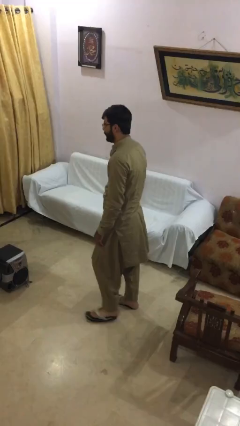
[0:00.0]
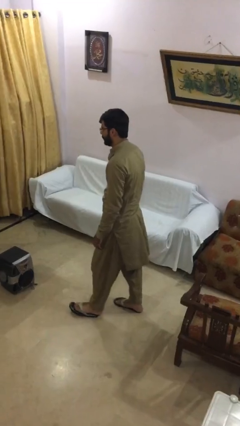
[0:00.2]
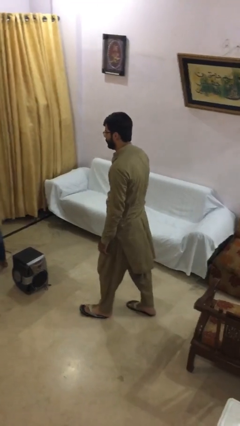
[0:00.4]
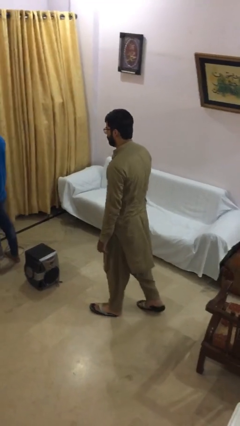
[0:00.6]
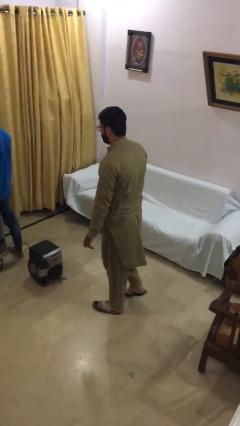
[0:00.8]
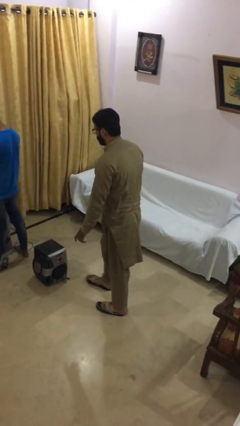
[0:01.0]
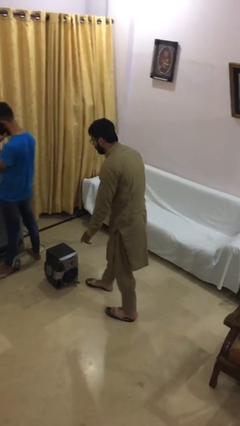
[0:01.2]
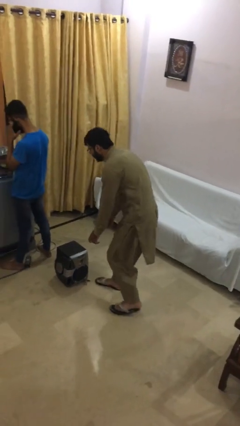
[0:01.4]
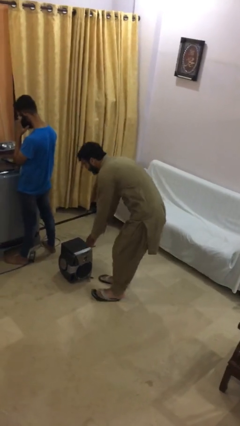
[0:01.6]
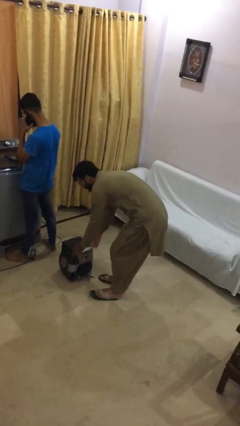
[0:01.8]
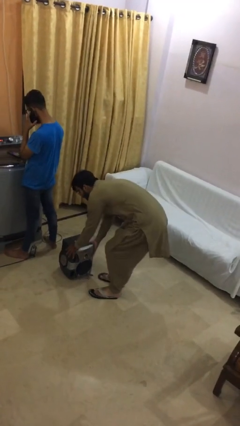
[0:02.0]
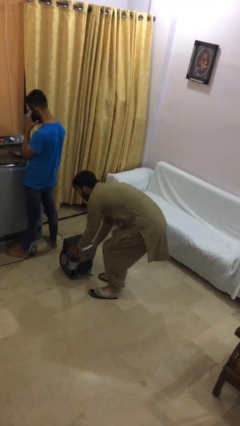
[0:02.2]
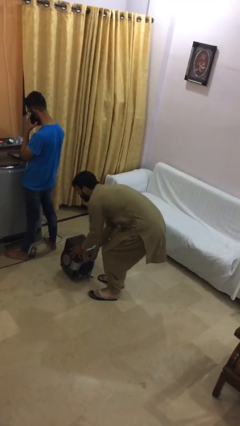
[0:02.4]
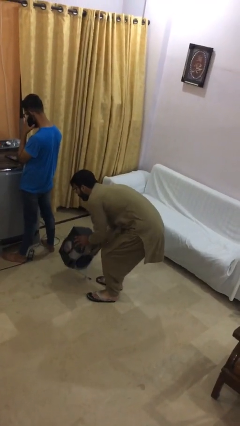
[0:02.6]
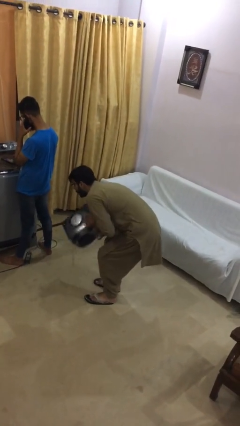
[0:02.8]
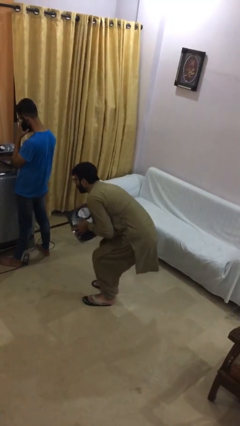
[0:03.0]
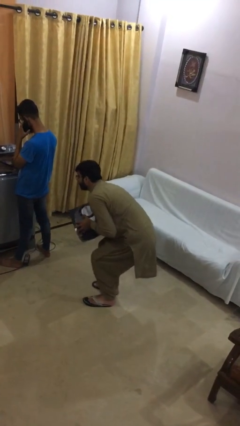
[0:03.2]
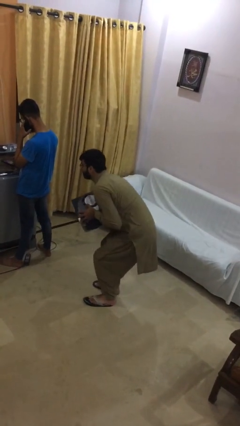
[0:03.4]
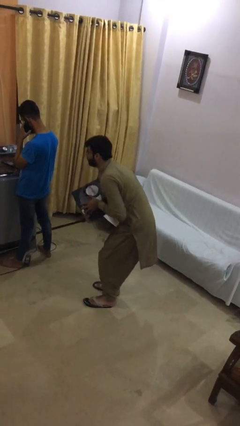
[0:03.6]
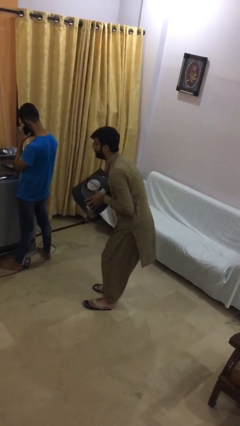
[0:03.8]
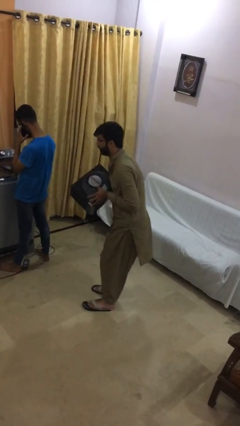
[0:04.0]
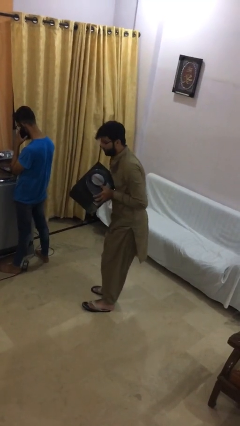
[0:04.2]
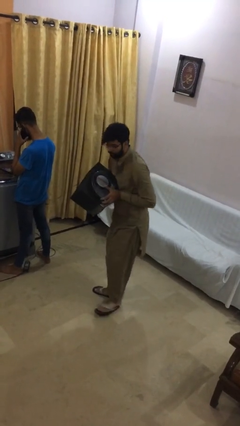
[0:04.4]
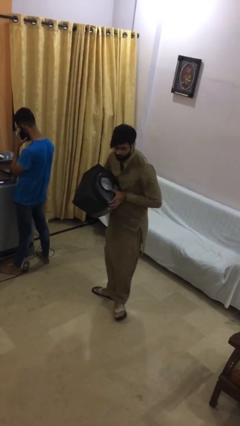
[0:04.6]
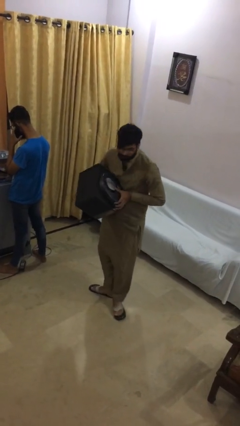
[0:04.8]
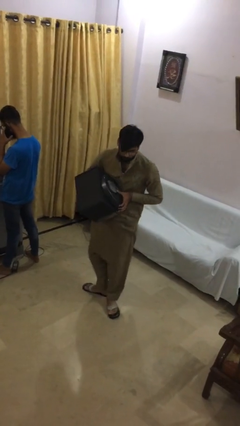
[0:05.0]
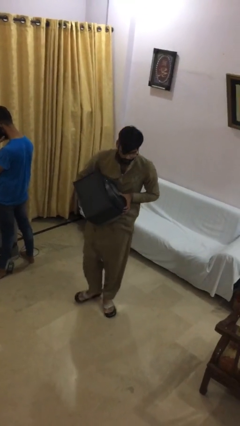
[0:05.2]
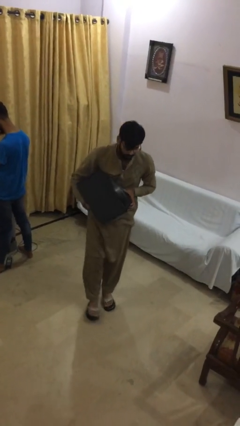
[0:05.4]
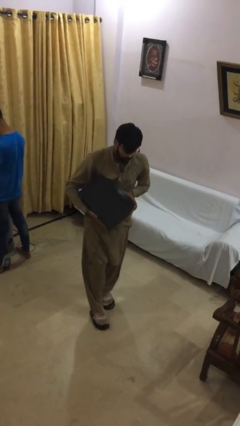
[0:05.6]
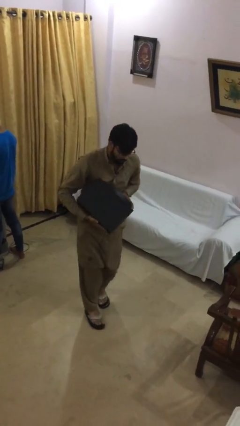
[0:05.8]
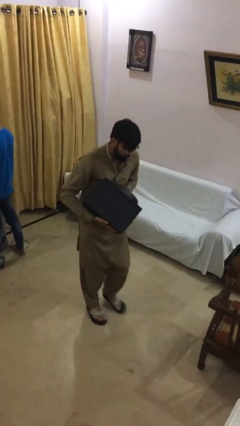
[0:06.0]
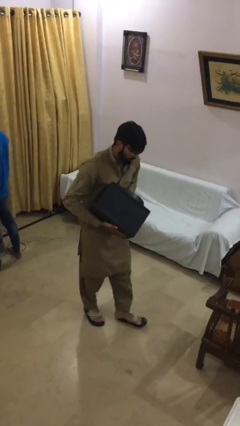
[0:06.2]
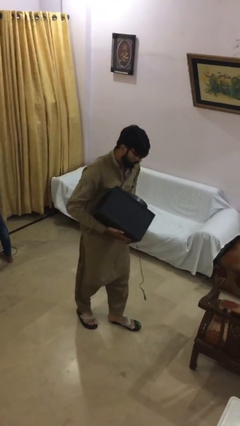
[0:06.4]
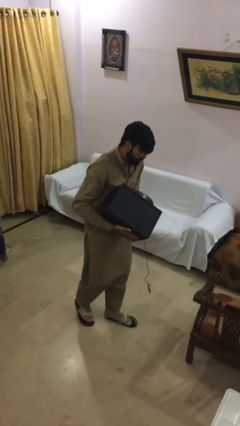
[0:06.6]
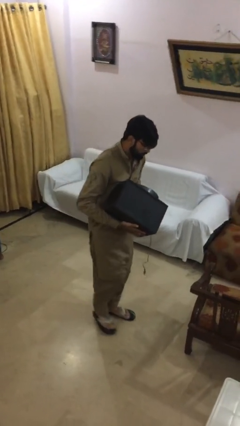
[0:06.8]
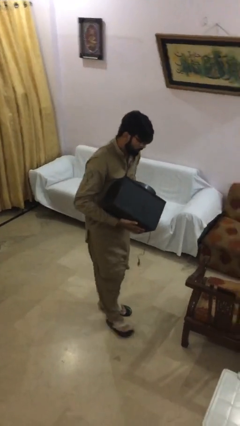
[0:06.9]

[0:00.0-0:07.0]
person steals object from person

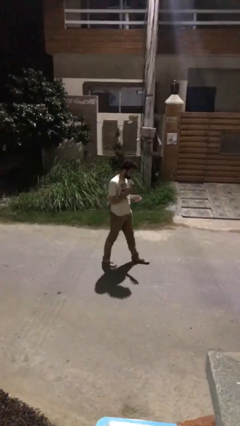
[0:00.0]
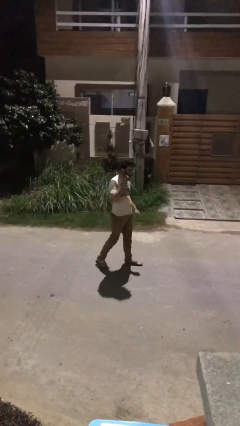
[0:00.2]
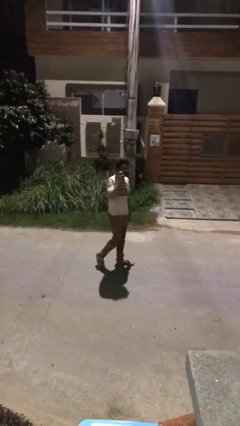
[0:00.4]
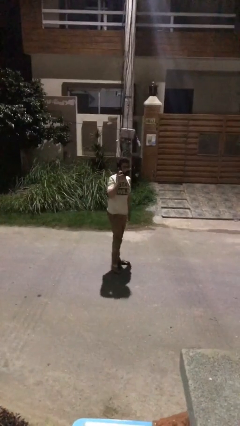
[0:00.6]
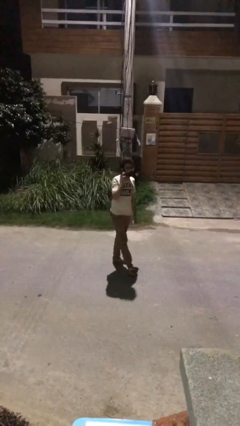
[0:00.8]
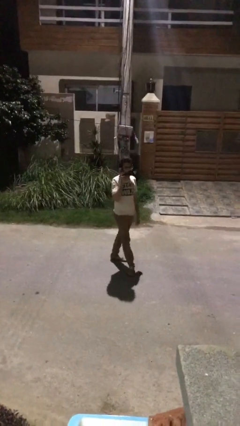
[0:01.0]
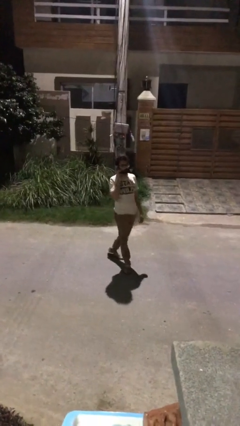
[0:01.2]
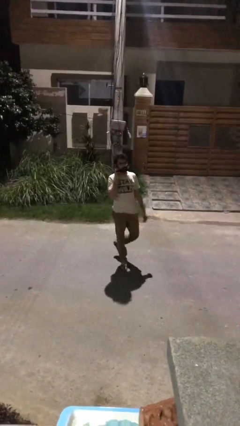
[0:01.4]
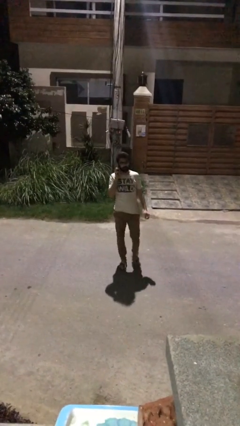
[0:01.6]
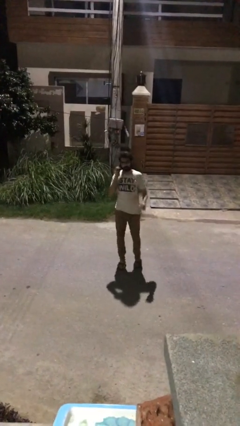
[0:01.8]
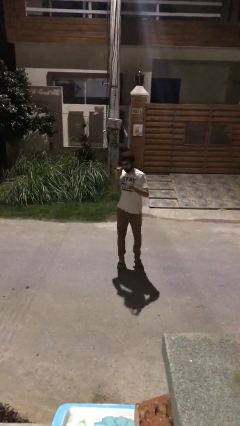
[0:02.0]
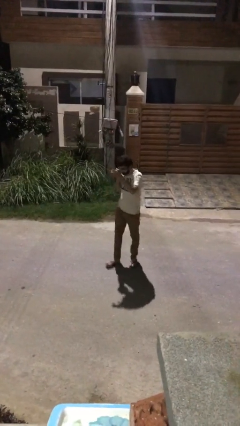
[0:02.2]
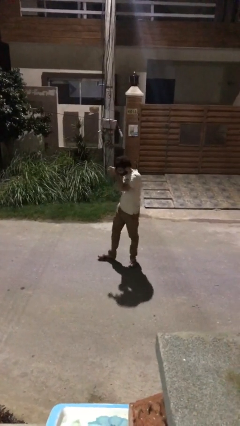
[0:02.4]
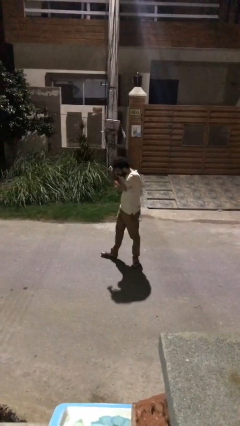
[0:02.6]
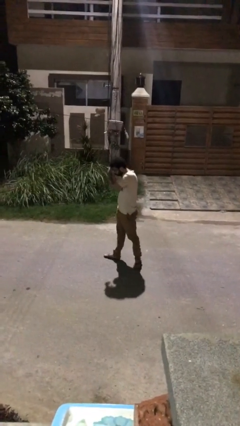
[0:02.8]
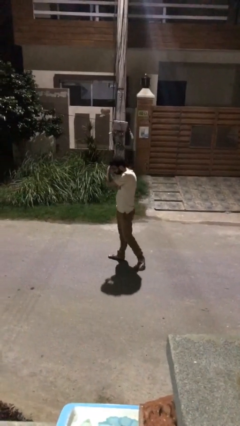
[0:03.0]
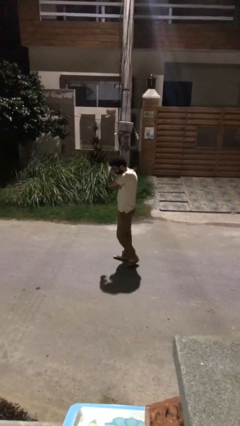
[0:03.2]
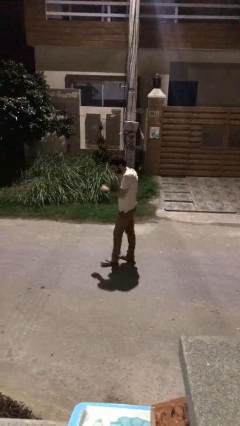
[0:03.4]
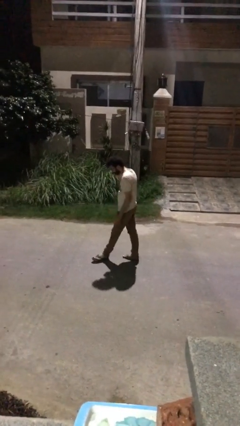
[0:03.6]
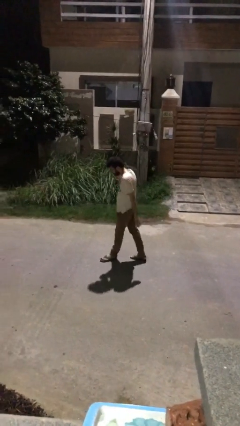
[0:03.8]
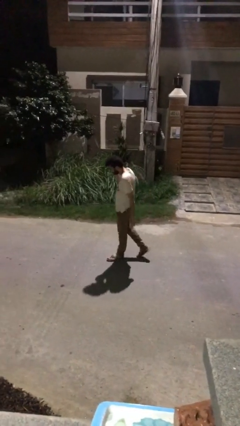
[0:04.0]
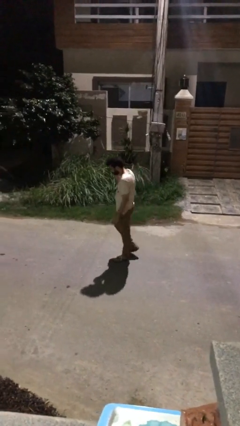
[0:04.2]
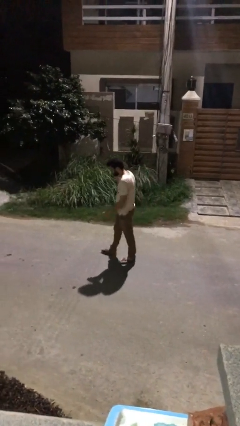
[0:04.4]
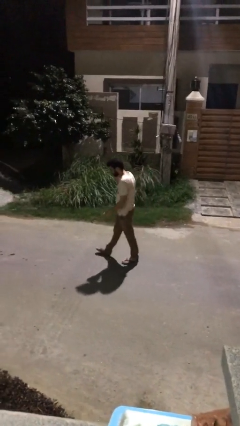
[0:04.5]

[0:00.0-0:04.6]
person talks on phone

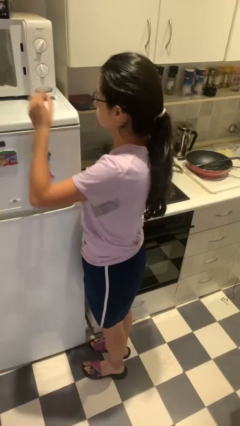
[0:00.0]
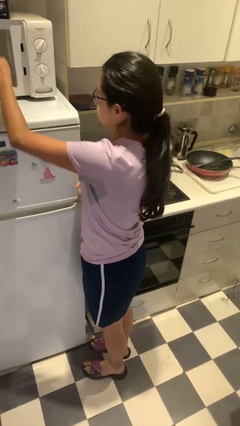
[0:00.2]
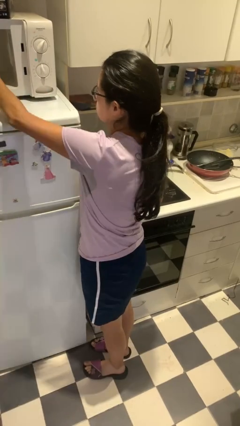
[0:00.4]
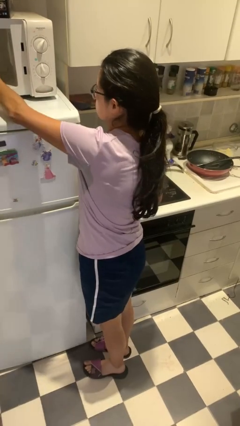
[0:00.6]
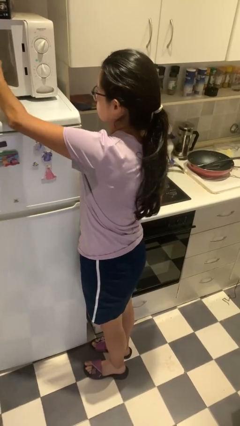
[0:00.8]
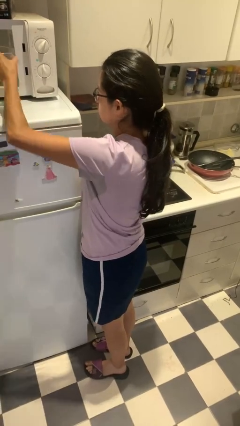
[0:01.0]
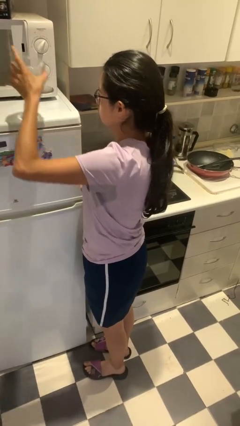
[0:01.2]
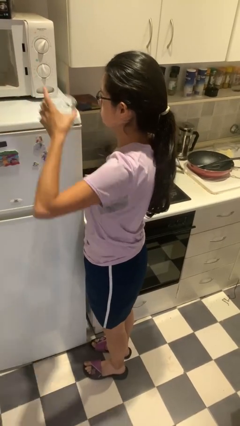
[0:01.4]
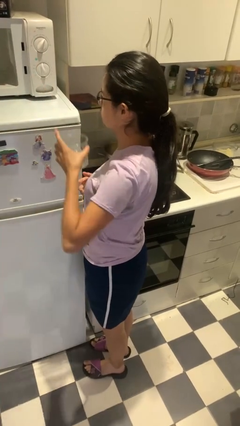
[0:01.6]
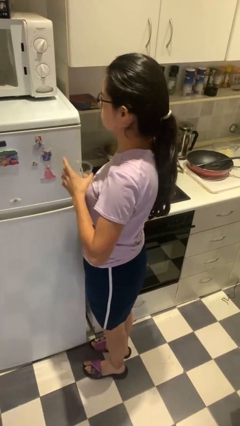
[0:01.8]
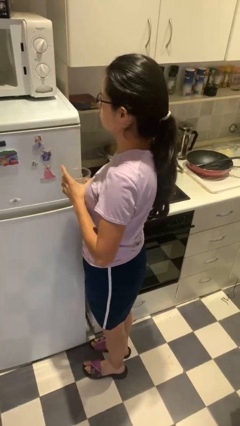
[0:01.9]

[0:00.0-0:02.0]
person takes object from microwave

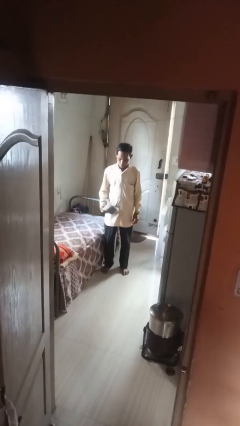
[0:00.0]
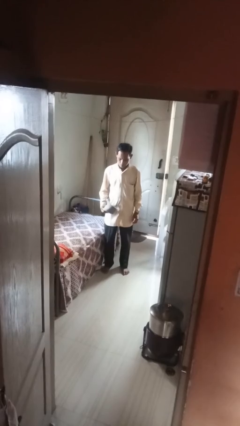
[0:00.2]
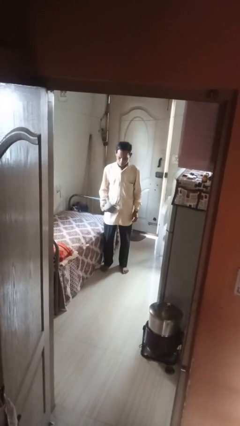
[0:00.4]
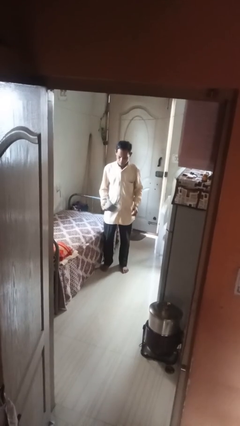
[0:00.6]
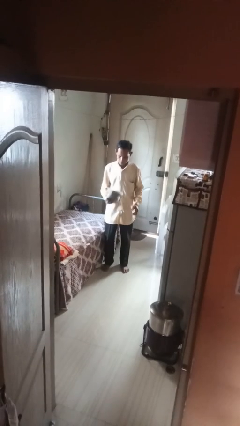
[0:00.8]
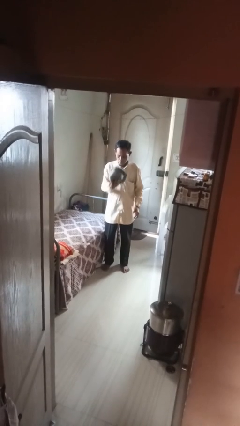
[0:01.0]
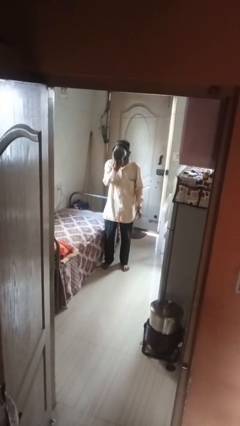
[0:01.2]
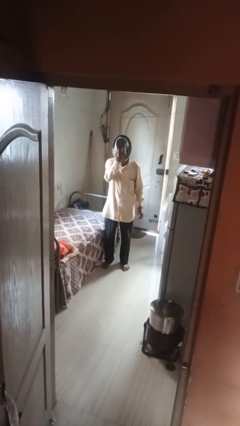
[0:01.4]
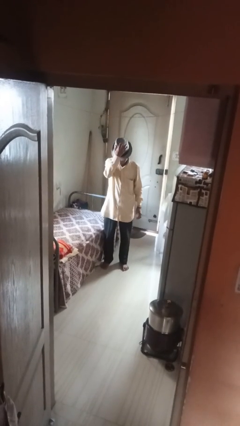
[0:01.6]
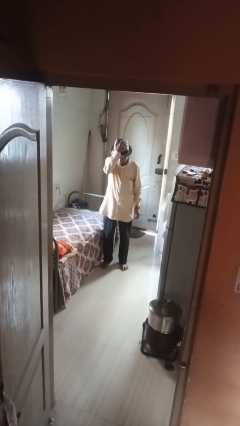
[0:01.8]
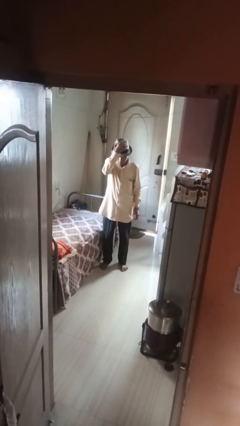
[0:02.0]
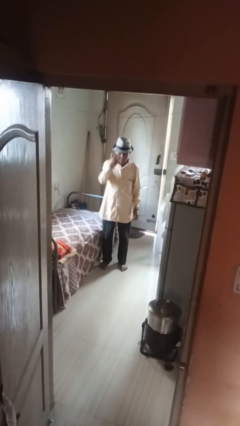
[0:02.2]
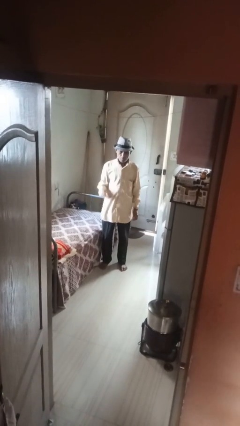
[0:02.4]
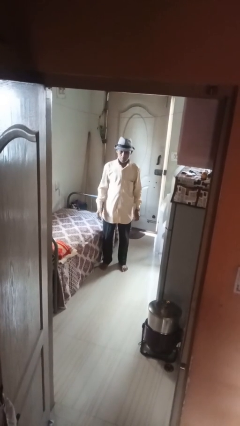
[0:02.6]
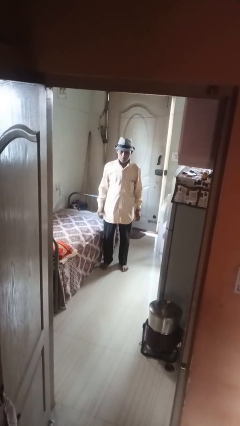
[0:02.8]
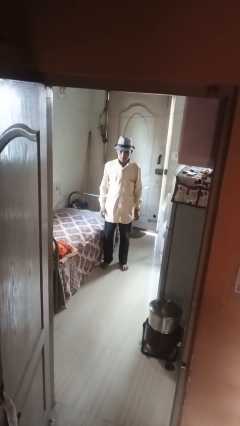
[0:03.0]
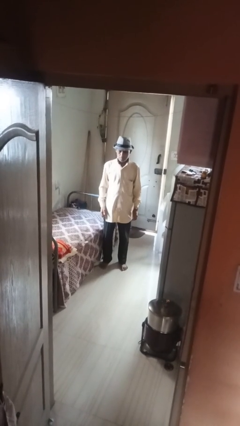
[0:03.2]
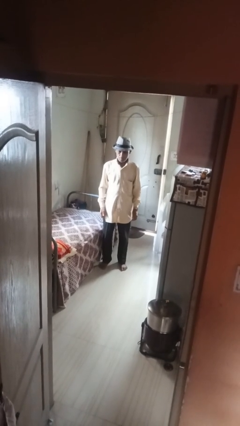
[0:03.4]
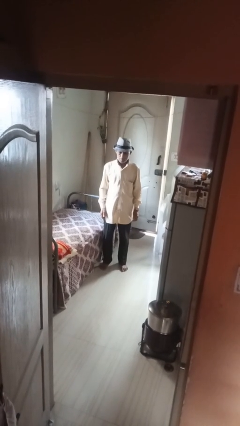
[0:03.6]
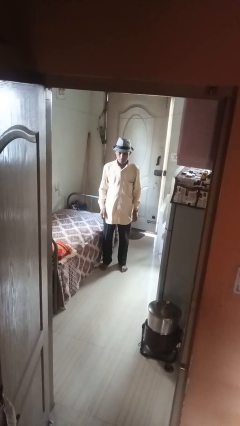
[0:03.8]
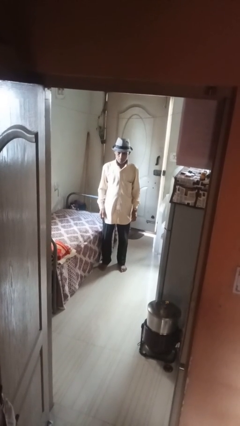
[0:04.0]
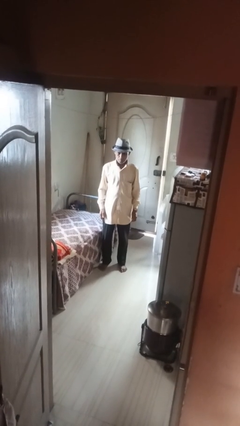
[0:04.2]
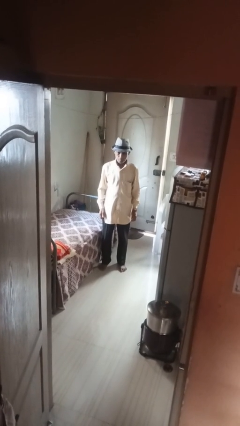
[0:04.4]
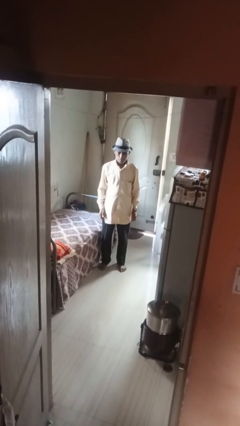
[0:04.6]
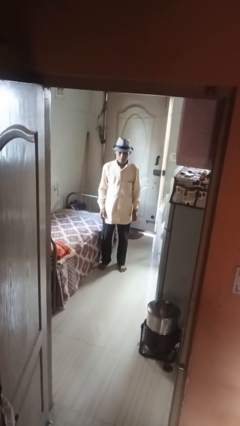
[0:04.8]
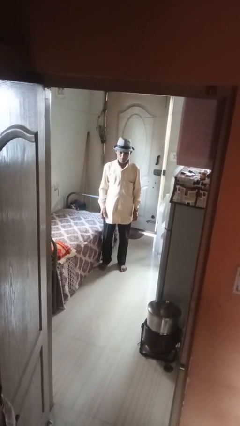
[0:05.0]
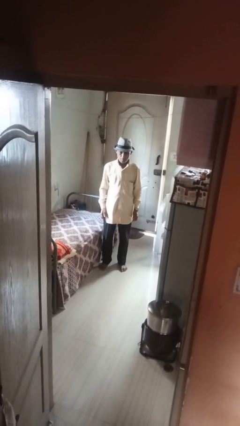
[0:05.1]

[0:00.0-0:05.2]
person puts on hat
